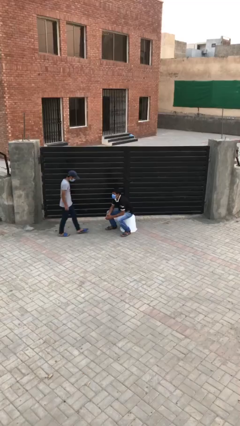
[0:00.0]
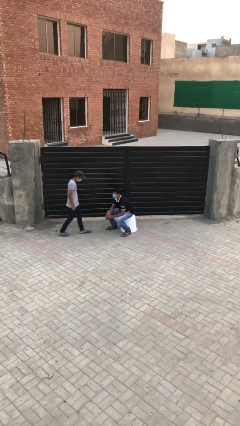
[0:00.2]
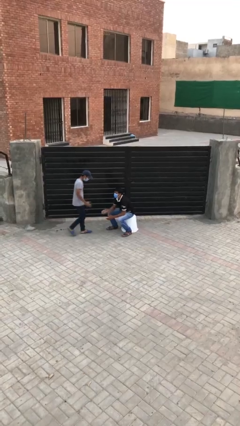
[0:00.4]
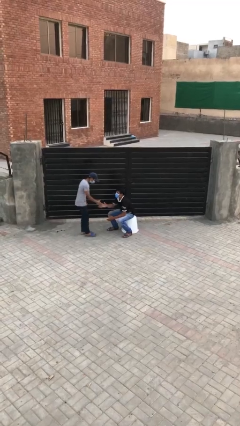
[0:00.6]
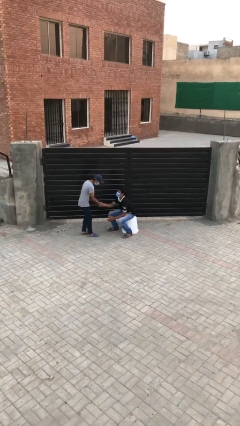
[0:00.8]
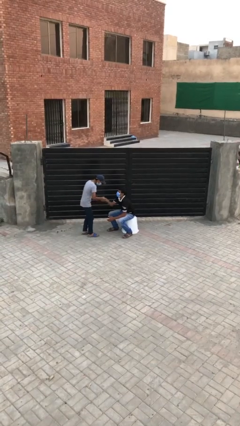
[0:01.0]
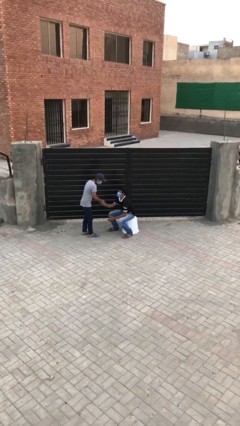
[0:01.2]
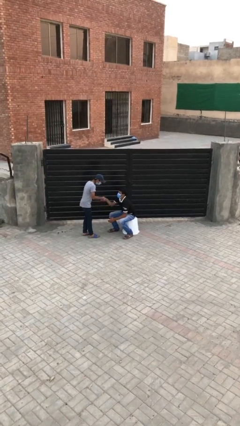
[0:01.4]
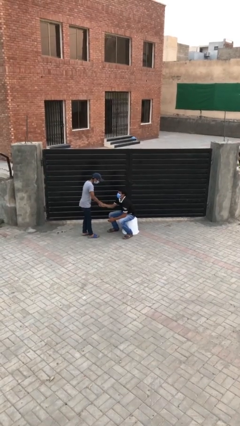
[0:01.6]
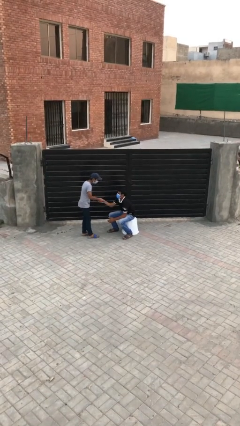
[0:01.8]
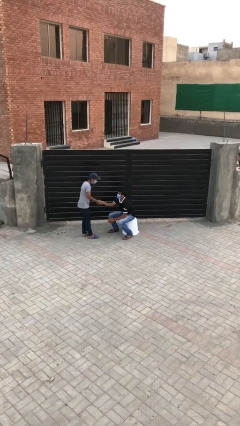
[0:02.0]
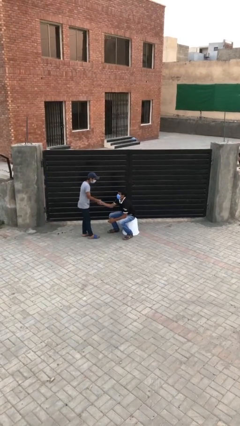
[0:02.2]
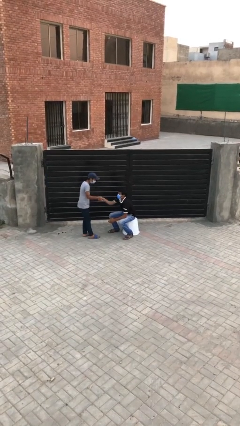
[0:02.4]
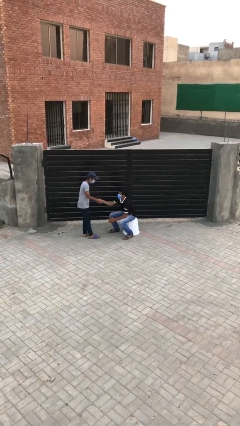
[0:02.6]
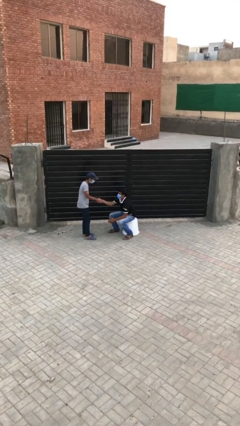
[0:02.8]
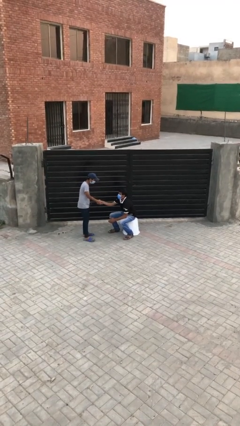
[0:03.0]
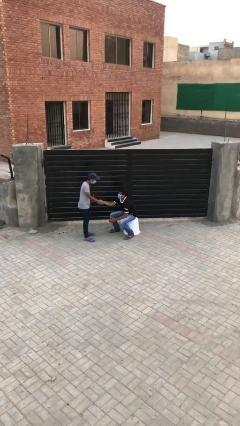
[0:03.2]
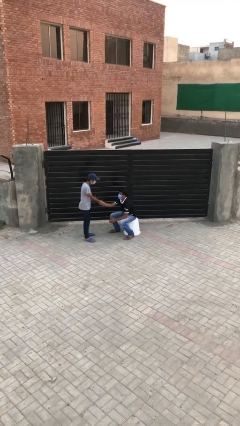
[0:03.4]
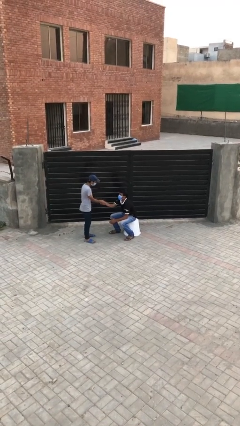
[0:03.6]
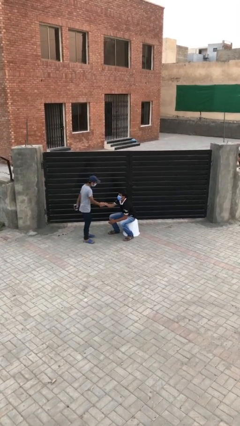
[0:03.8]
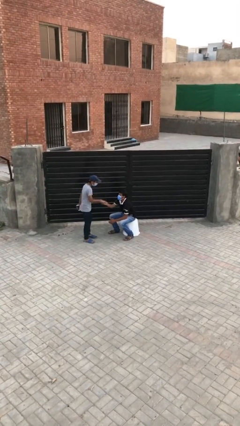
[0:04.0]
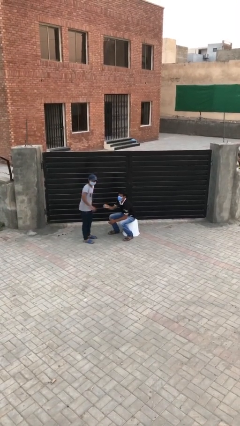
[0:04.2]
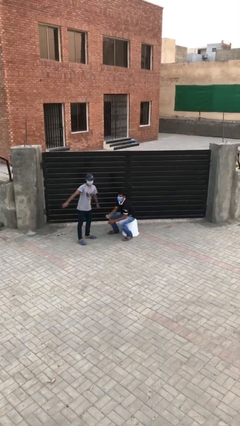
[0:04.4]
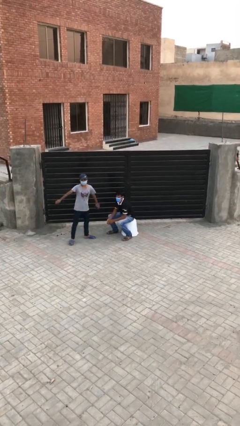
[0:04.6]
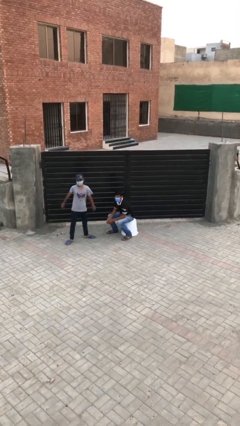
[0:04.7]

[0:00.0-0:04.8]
person shakes hand

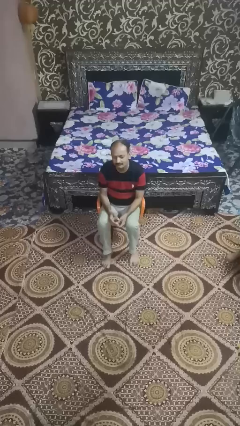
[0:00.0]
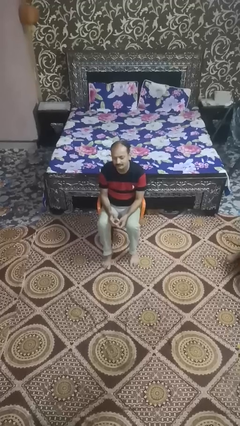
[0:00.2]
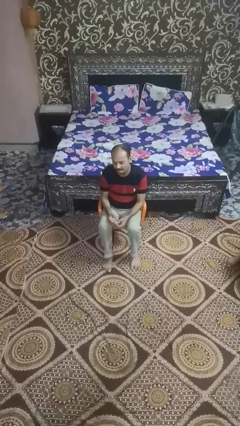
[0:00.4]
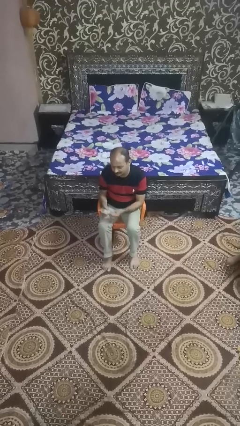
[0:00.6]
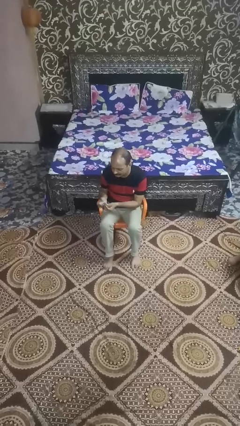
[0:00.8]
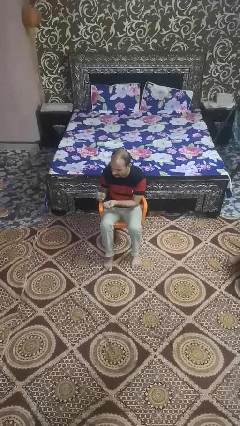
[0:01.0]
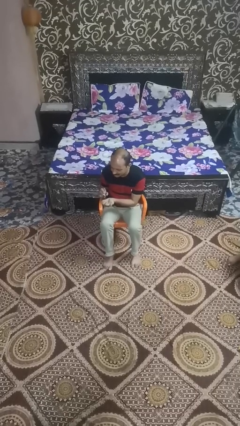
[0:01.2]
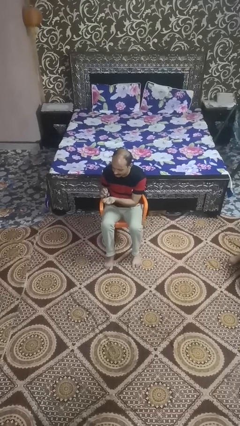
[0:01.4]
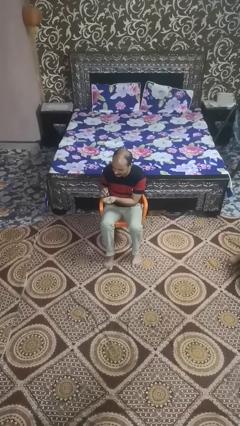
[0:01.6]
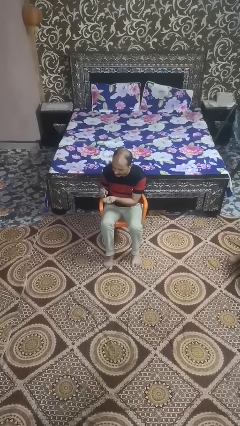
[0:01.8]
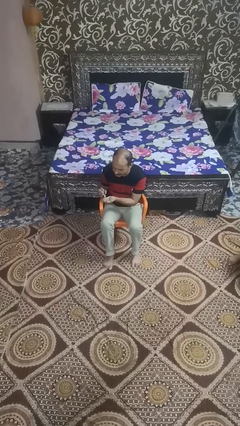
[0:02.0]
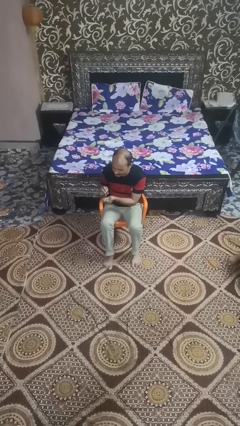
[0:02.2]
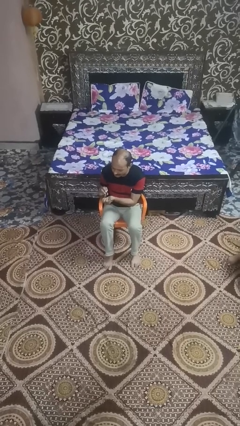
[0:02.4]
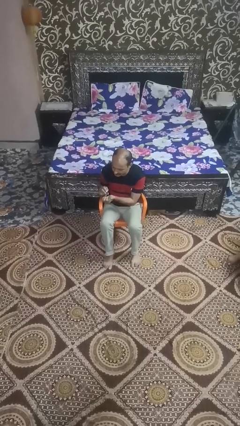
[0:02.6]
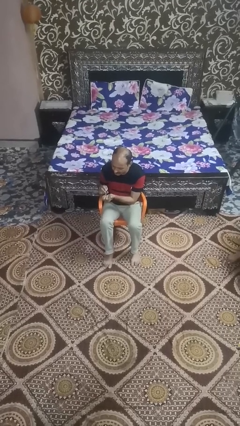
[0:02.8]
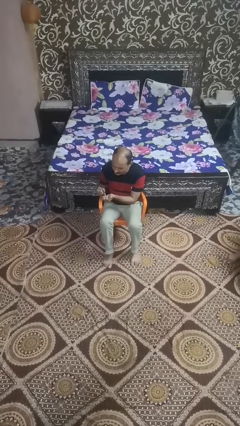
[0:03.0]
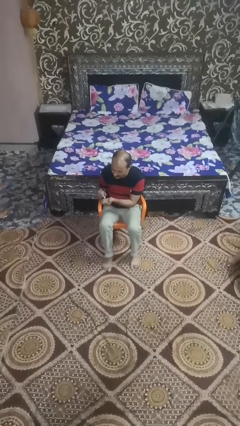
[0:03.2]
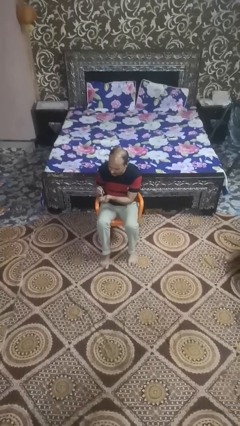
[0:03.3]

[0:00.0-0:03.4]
person clips fingernails

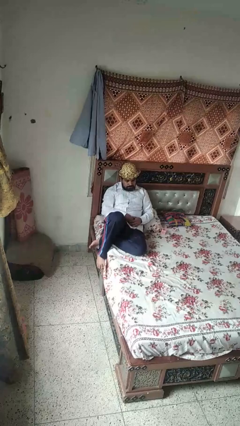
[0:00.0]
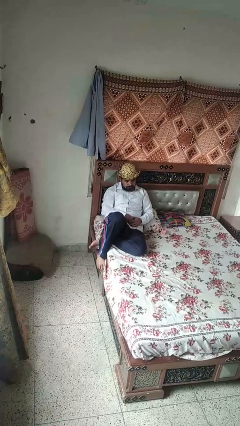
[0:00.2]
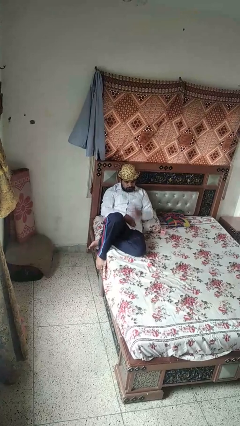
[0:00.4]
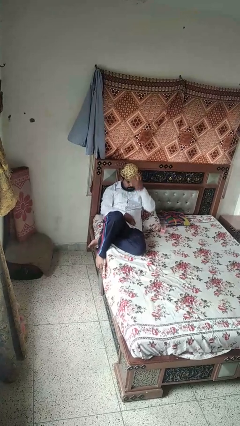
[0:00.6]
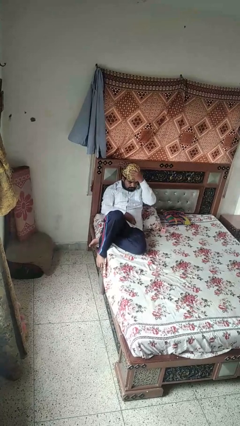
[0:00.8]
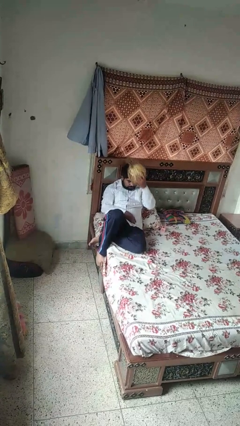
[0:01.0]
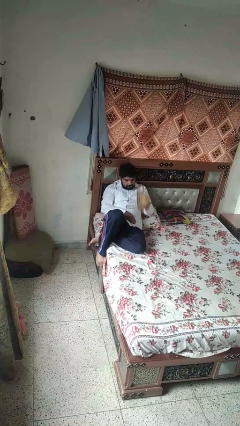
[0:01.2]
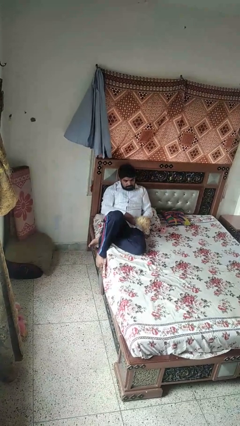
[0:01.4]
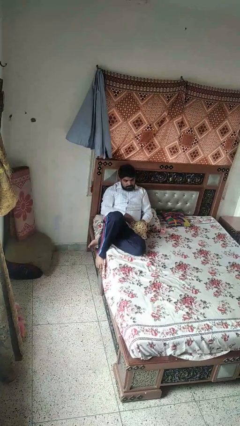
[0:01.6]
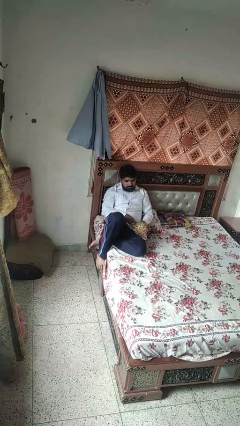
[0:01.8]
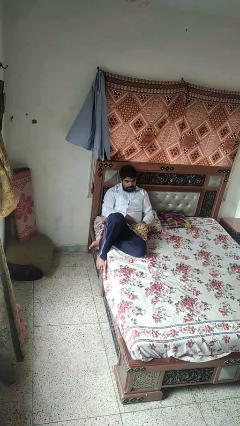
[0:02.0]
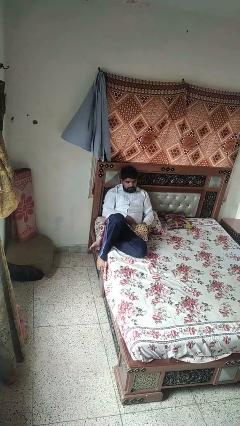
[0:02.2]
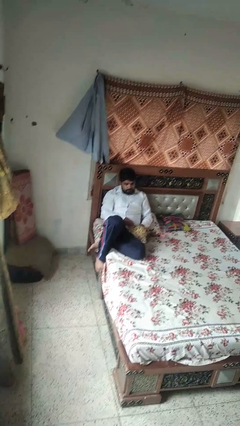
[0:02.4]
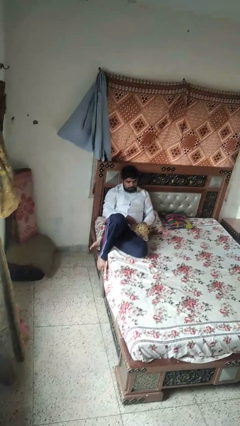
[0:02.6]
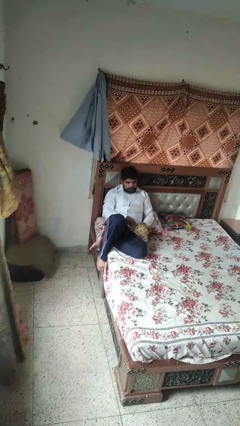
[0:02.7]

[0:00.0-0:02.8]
person takes off hat

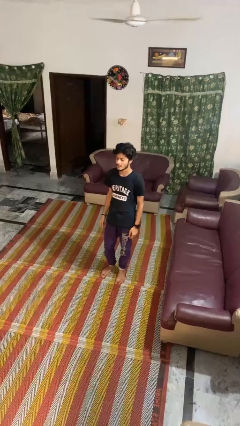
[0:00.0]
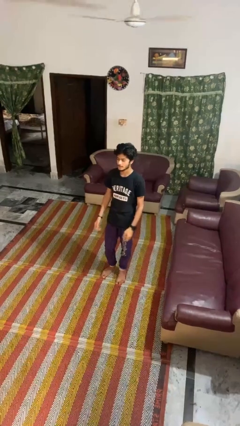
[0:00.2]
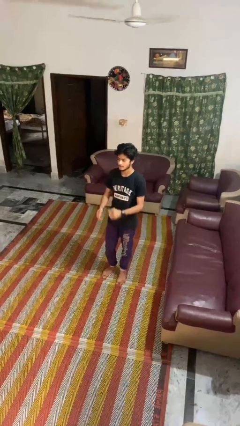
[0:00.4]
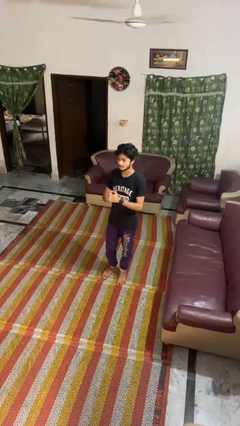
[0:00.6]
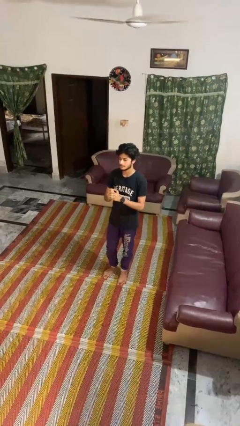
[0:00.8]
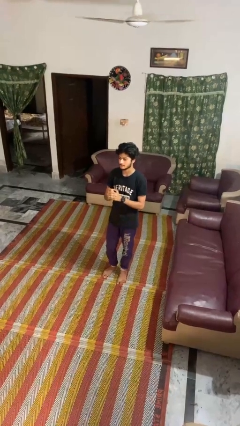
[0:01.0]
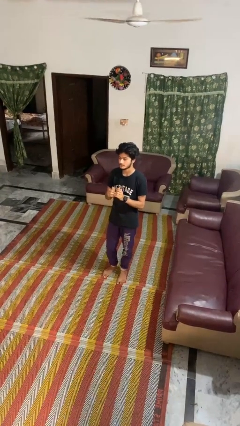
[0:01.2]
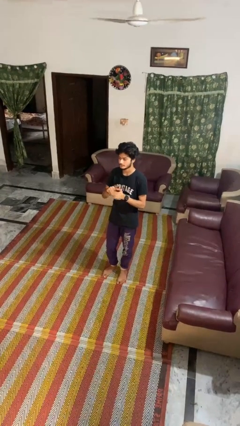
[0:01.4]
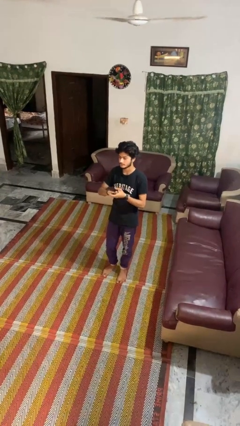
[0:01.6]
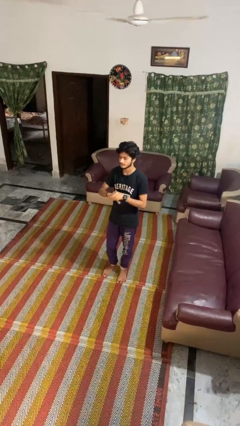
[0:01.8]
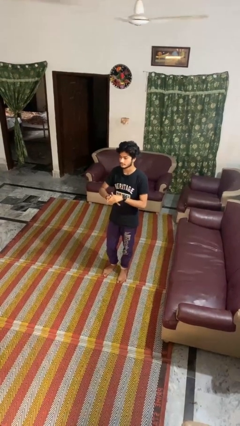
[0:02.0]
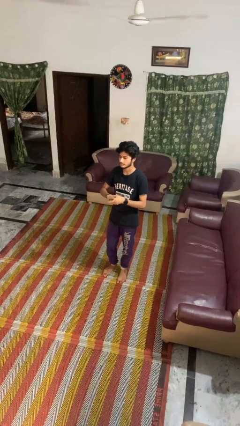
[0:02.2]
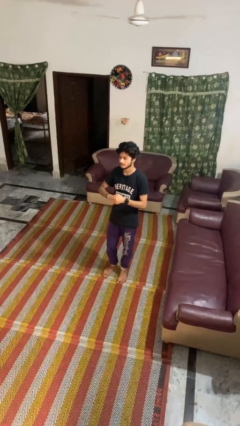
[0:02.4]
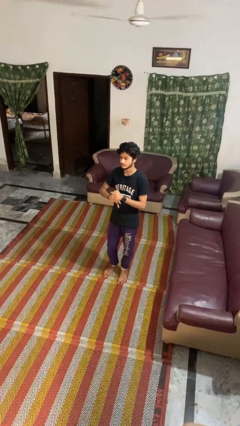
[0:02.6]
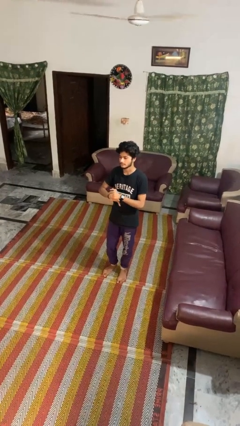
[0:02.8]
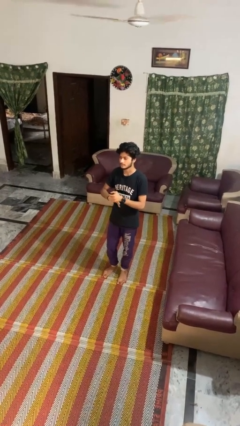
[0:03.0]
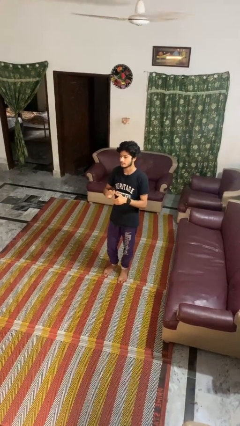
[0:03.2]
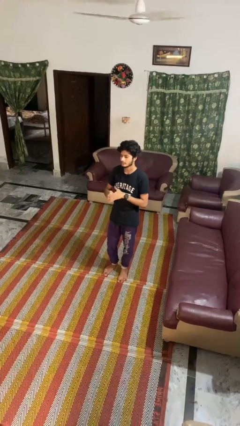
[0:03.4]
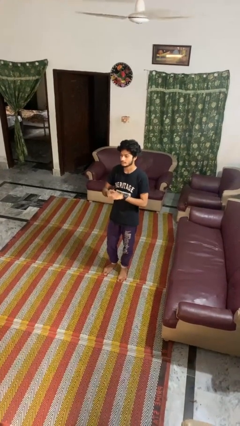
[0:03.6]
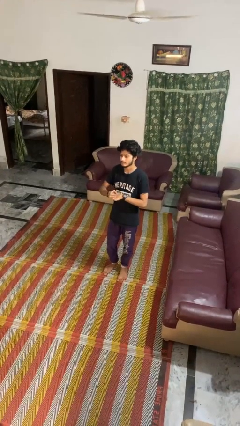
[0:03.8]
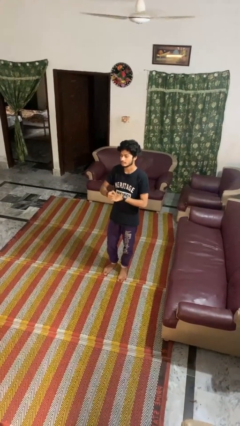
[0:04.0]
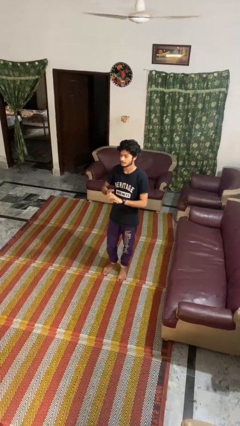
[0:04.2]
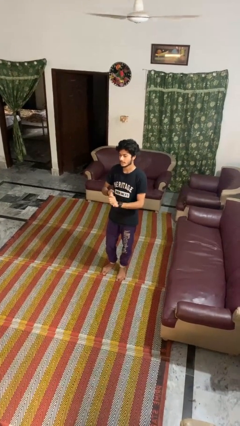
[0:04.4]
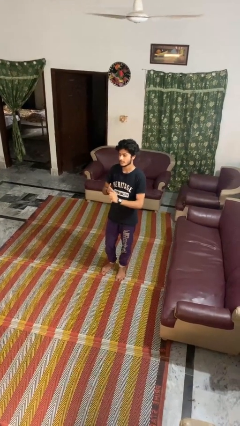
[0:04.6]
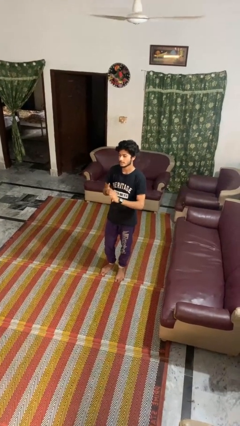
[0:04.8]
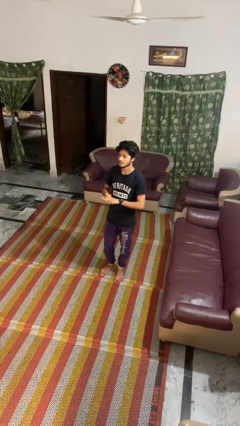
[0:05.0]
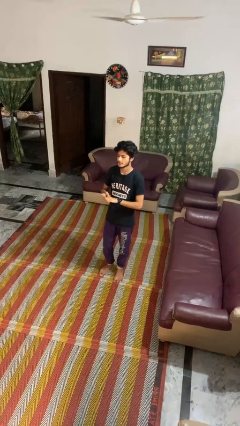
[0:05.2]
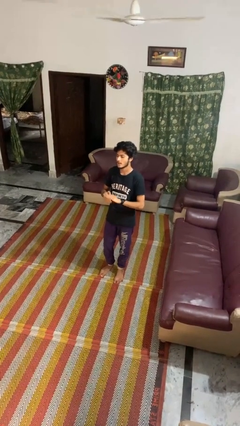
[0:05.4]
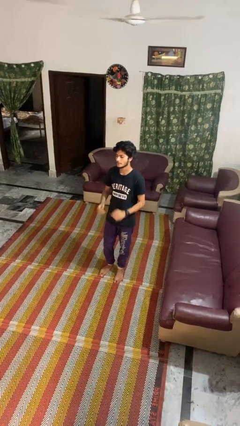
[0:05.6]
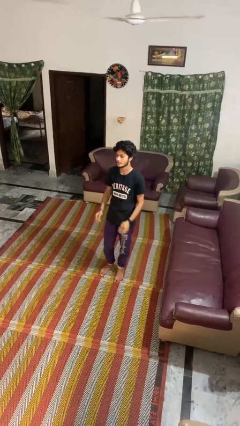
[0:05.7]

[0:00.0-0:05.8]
person cracks knuckles

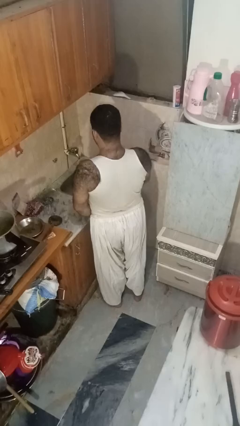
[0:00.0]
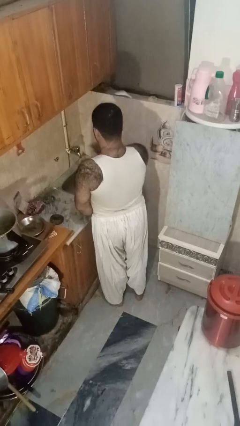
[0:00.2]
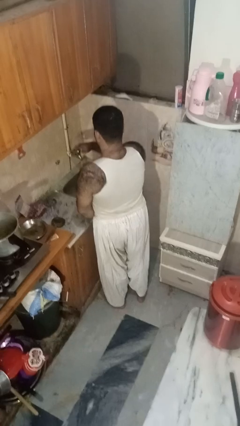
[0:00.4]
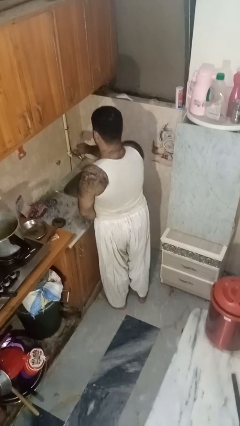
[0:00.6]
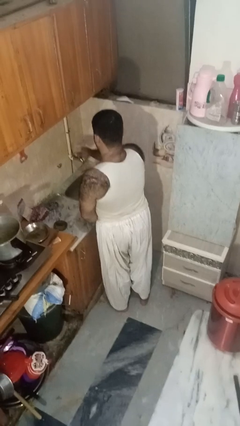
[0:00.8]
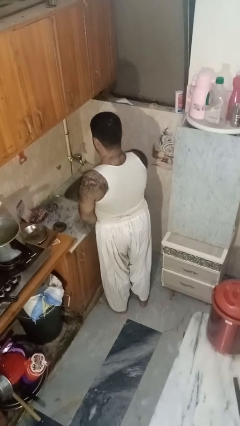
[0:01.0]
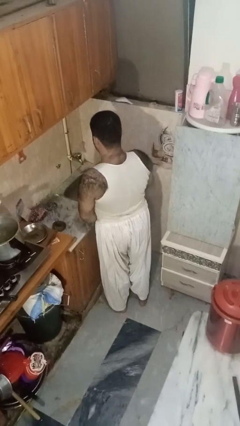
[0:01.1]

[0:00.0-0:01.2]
person turns off faucet
